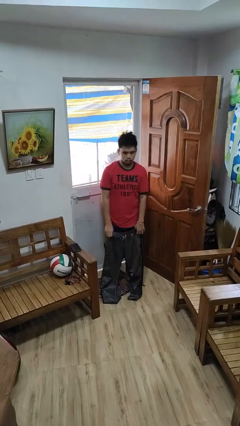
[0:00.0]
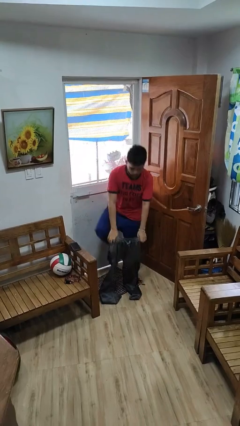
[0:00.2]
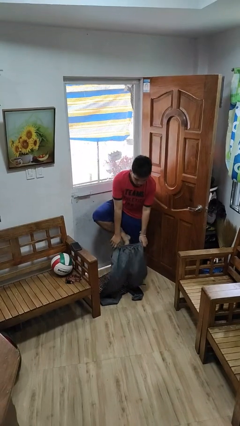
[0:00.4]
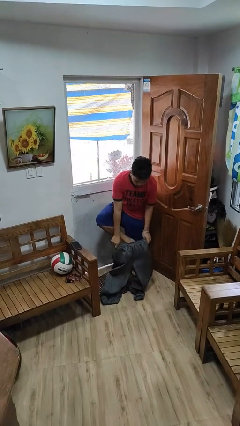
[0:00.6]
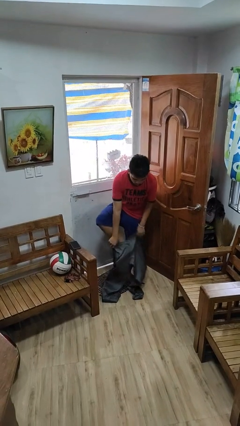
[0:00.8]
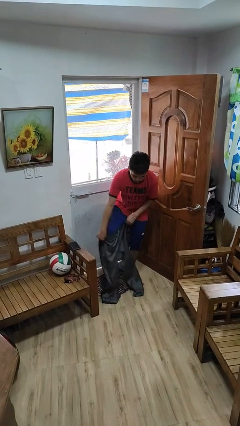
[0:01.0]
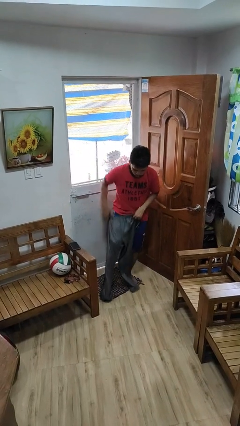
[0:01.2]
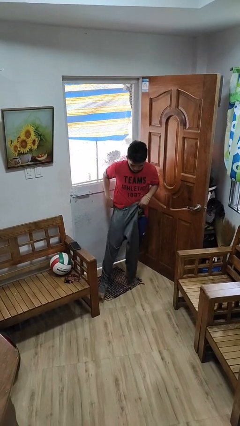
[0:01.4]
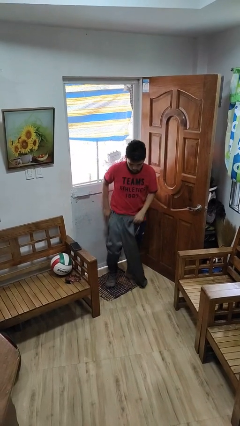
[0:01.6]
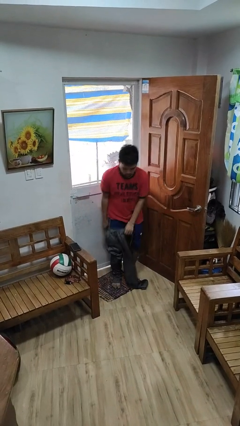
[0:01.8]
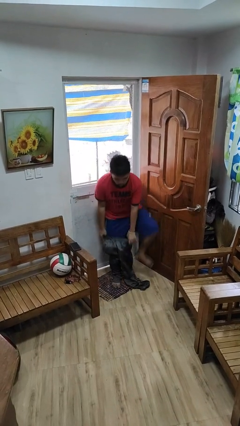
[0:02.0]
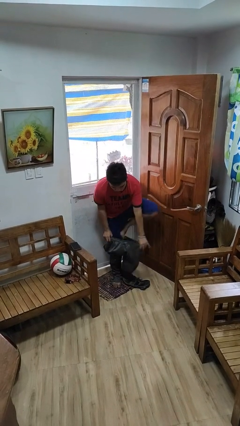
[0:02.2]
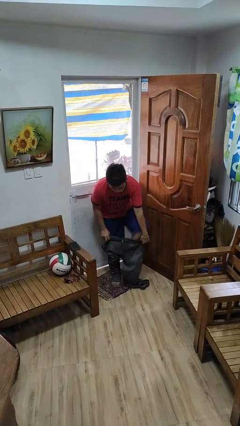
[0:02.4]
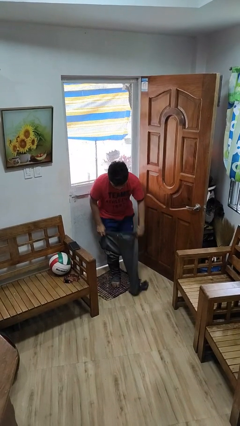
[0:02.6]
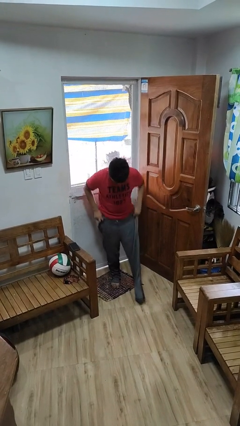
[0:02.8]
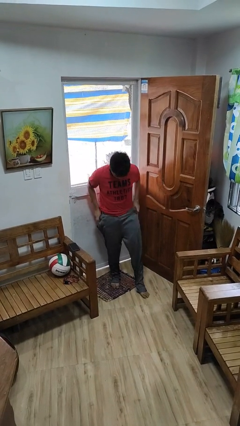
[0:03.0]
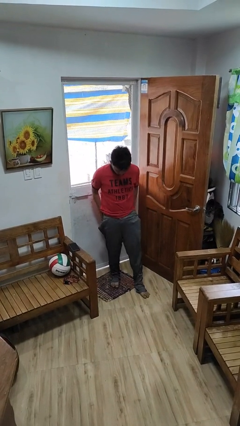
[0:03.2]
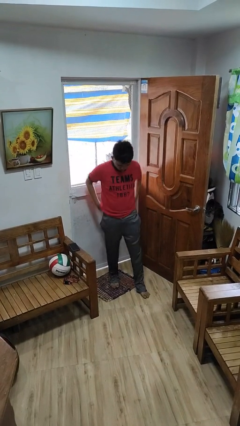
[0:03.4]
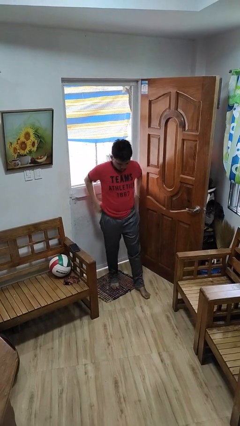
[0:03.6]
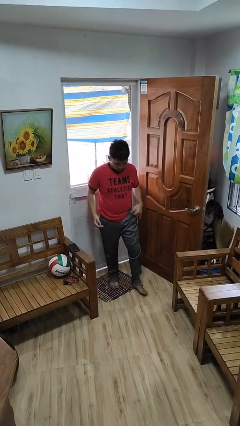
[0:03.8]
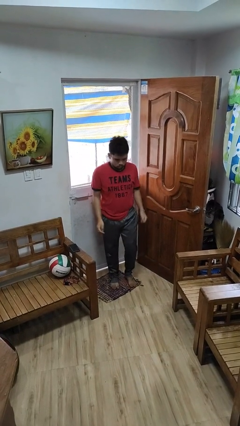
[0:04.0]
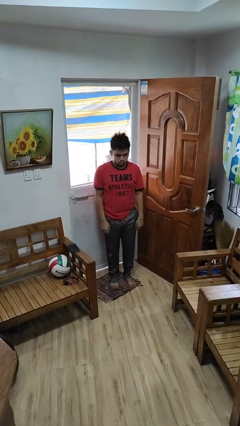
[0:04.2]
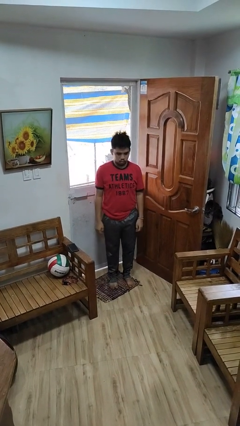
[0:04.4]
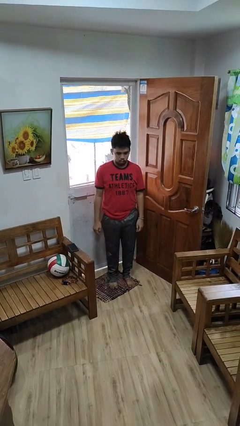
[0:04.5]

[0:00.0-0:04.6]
person puts on pants

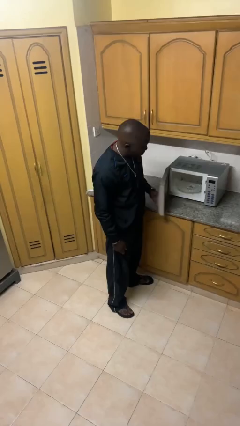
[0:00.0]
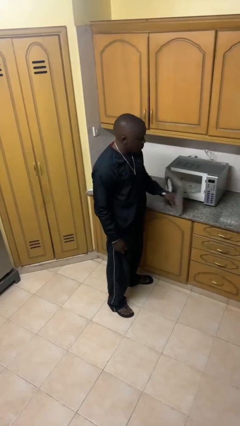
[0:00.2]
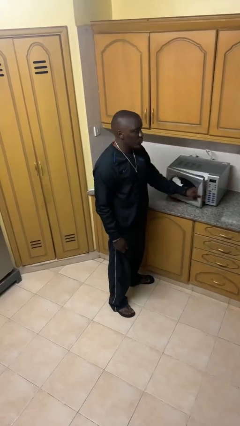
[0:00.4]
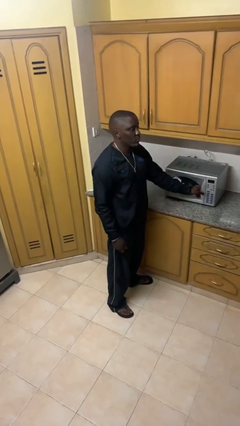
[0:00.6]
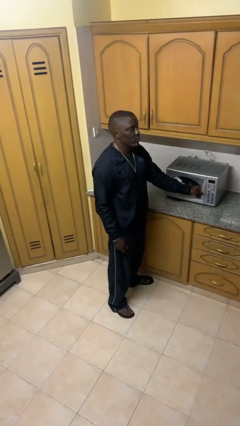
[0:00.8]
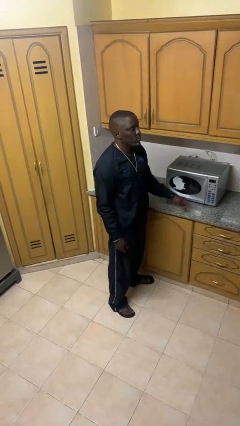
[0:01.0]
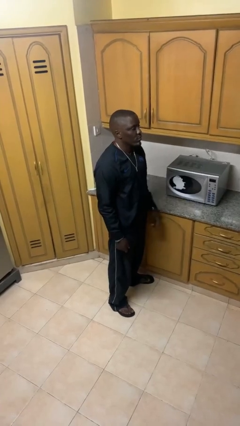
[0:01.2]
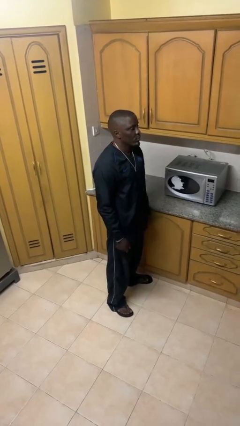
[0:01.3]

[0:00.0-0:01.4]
person closes microwave

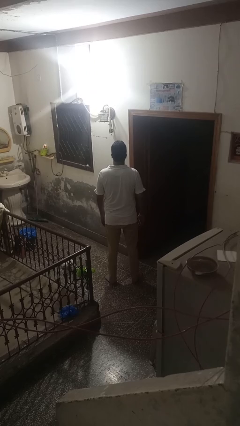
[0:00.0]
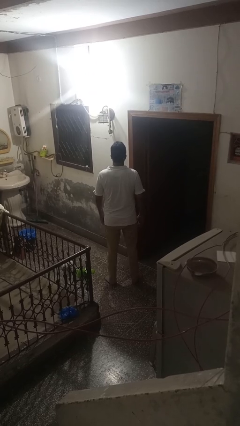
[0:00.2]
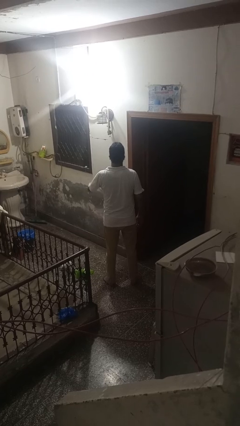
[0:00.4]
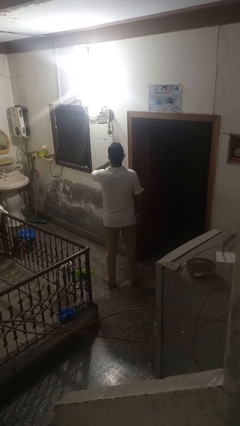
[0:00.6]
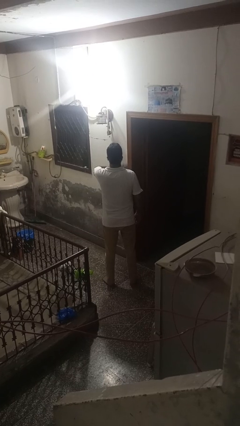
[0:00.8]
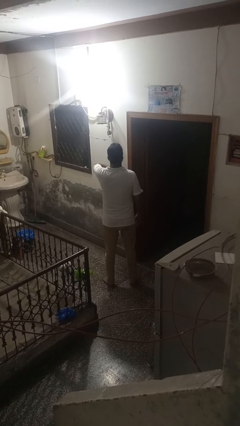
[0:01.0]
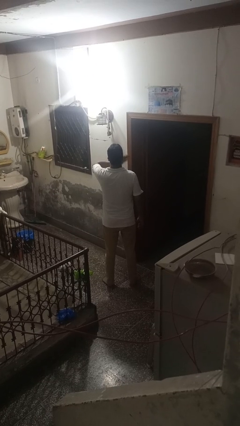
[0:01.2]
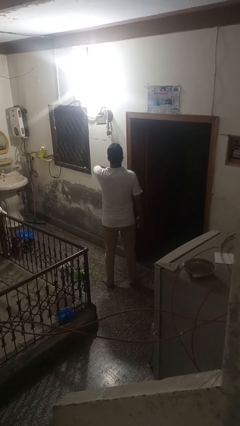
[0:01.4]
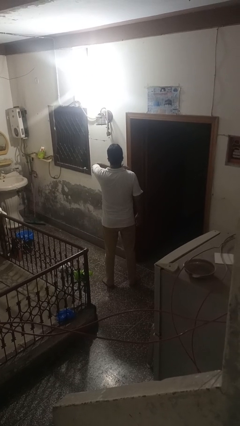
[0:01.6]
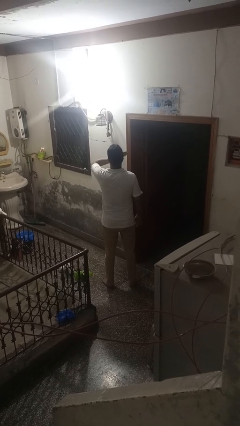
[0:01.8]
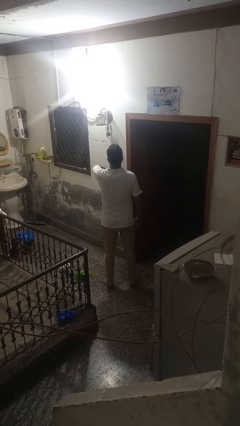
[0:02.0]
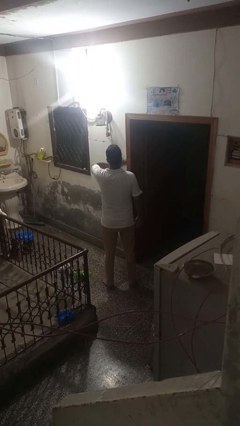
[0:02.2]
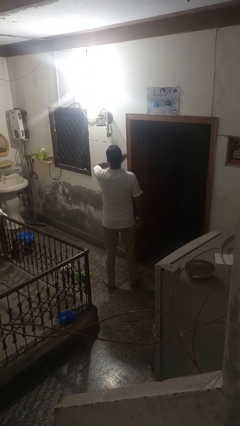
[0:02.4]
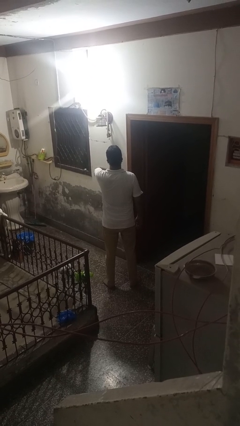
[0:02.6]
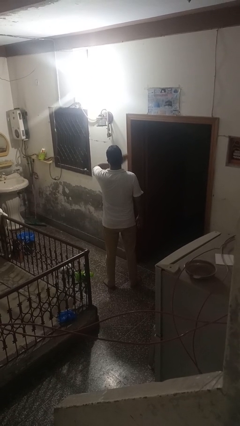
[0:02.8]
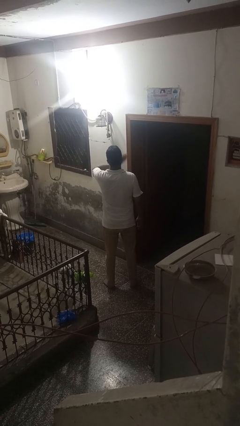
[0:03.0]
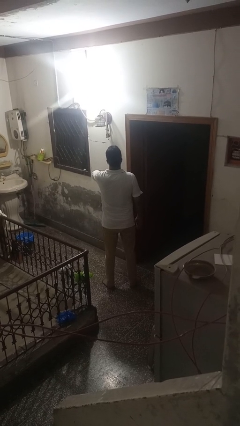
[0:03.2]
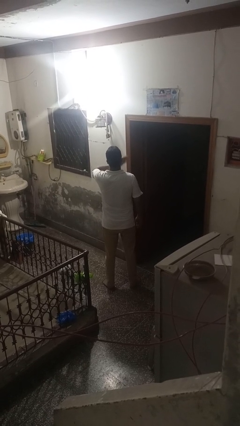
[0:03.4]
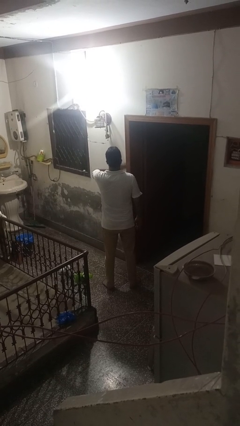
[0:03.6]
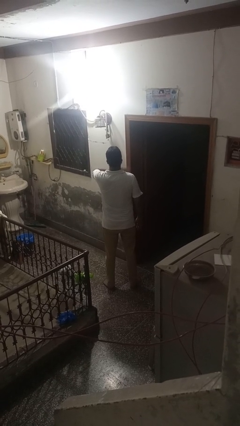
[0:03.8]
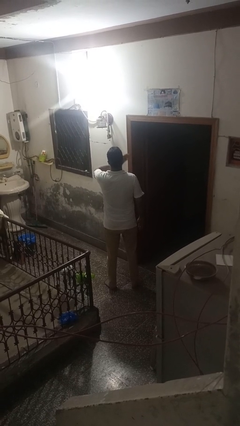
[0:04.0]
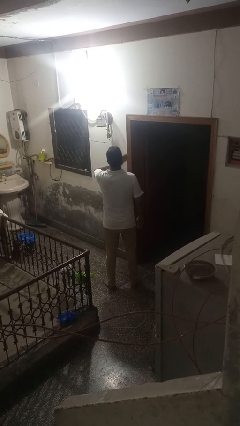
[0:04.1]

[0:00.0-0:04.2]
person drums on chest

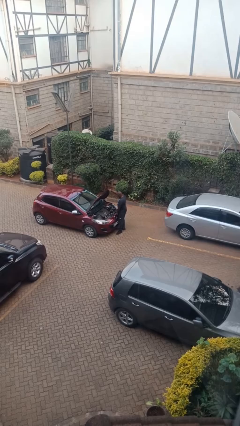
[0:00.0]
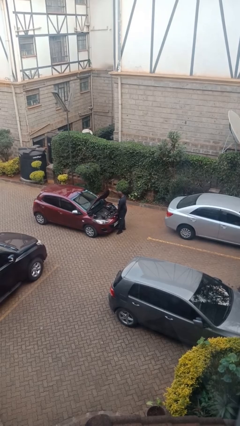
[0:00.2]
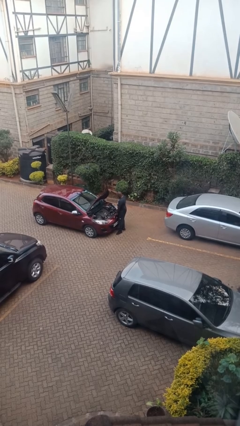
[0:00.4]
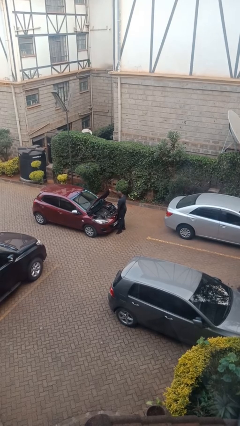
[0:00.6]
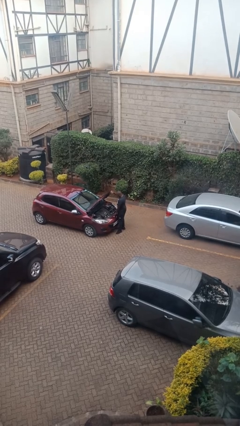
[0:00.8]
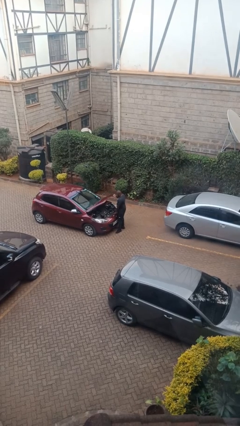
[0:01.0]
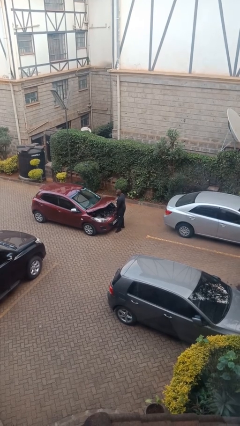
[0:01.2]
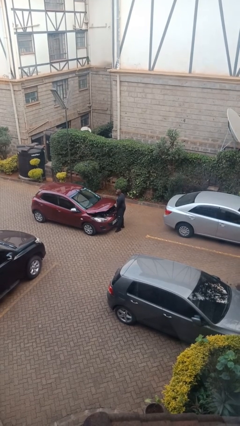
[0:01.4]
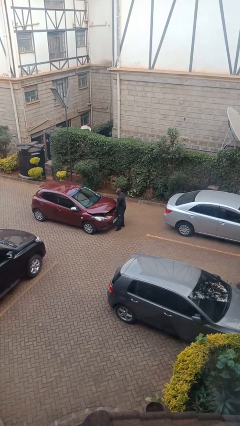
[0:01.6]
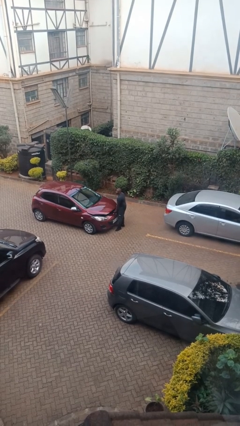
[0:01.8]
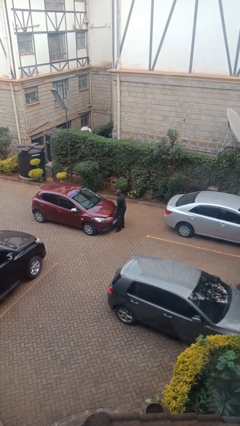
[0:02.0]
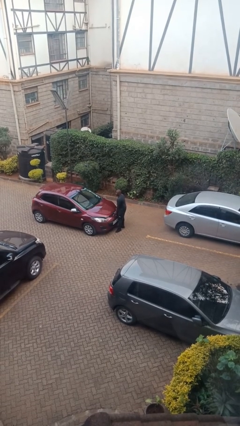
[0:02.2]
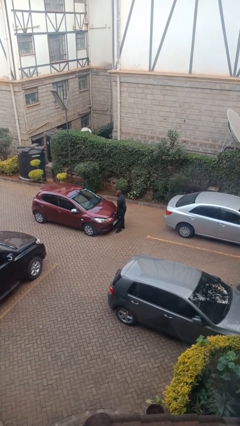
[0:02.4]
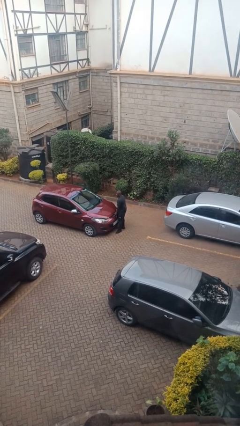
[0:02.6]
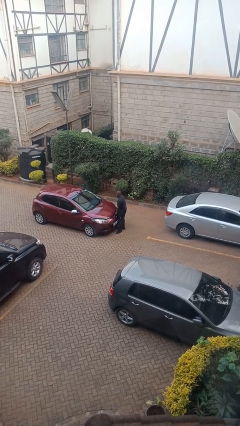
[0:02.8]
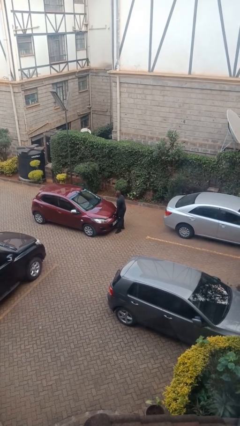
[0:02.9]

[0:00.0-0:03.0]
person closes car hood

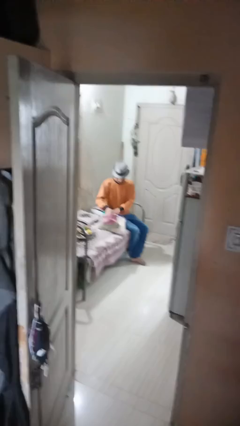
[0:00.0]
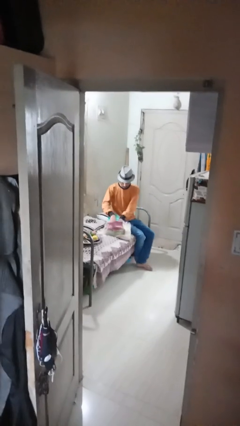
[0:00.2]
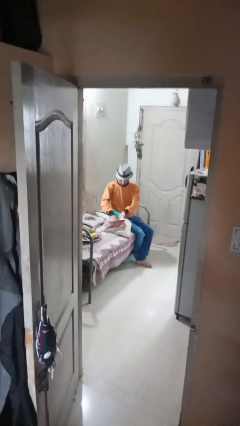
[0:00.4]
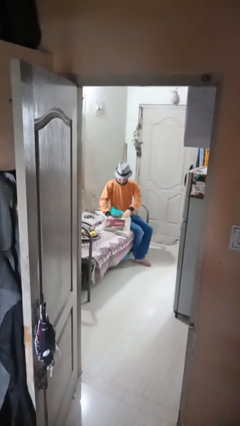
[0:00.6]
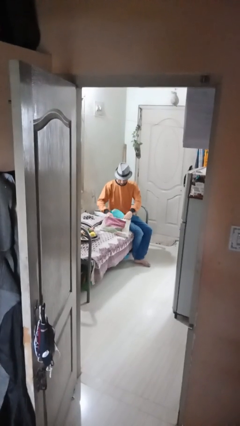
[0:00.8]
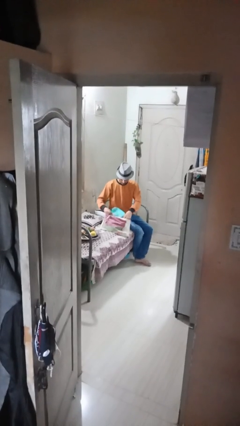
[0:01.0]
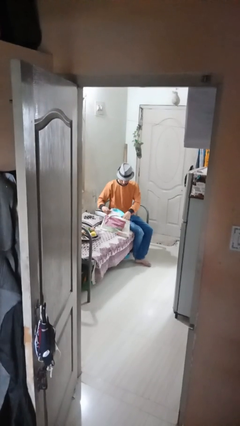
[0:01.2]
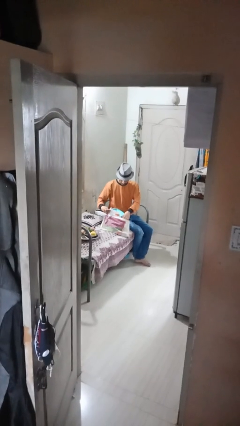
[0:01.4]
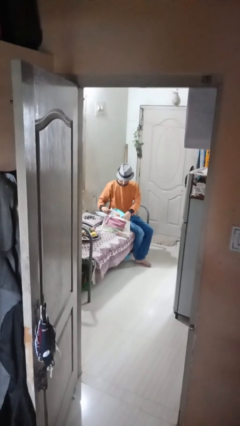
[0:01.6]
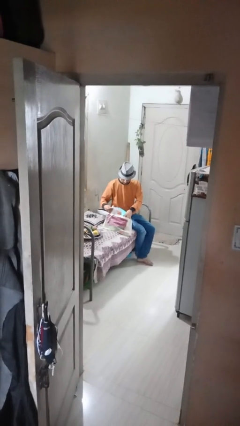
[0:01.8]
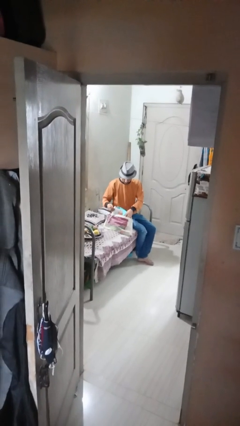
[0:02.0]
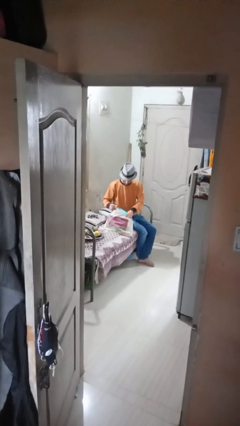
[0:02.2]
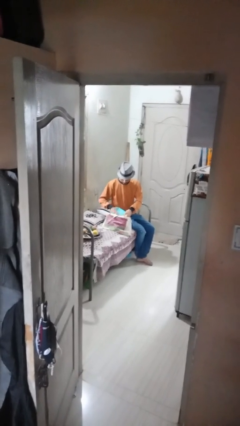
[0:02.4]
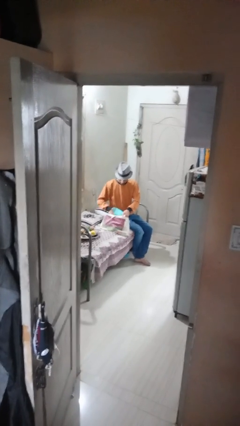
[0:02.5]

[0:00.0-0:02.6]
person searches in bag

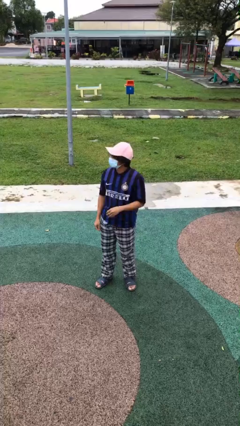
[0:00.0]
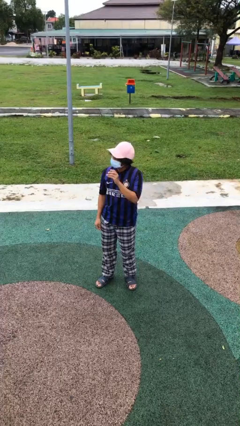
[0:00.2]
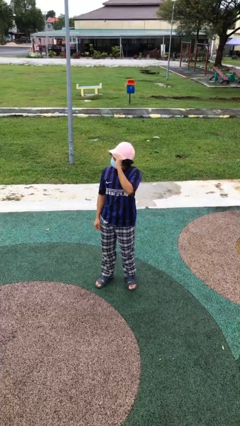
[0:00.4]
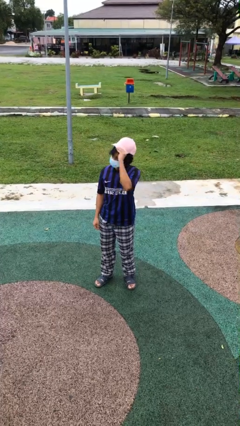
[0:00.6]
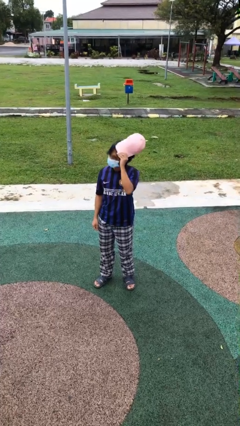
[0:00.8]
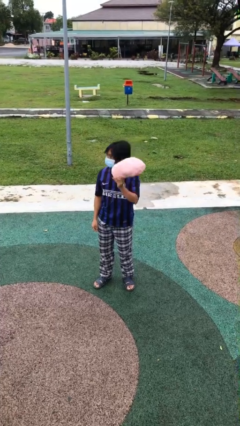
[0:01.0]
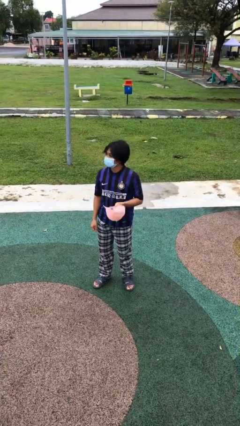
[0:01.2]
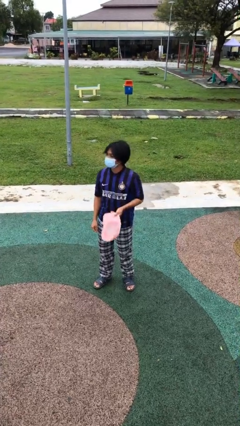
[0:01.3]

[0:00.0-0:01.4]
person takes off hat

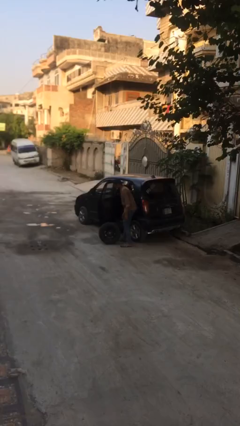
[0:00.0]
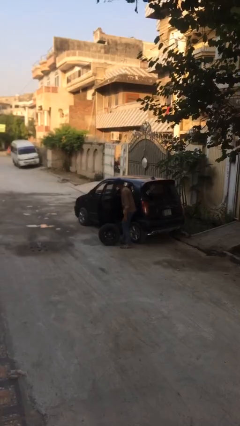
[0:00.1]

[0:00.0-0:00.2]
person closes car door
